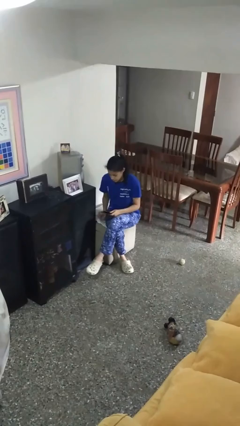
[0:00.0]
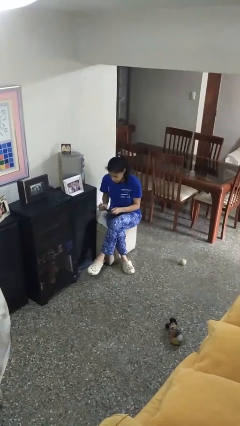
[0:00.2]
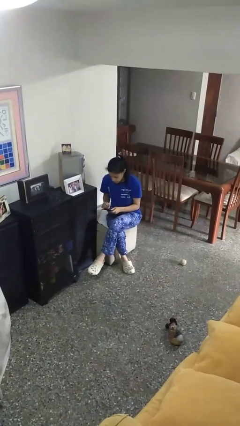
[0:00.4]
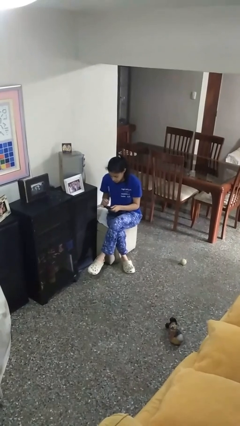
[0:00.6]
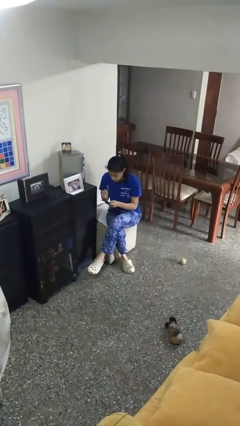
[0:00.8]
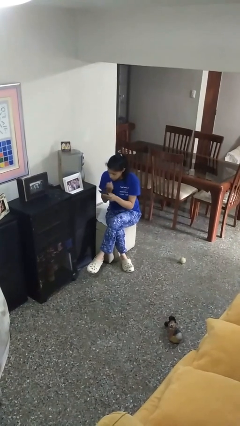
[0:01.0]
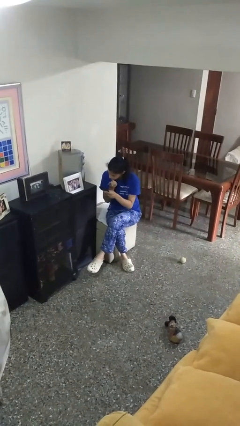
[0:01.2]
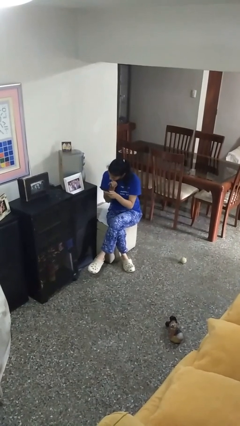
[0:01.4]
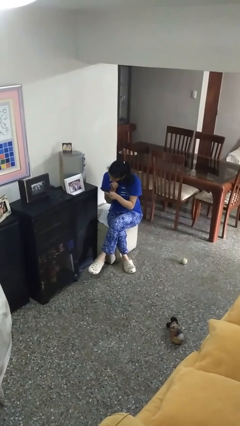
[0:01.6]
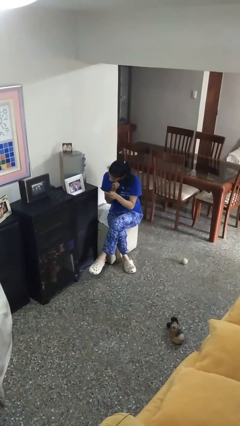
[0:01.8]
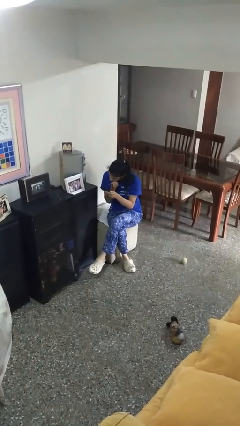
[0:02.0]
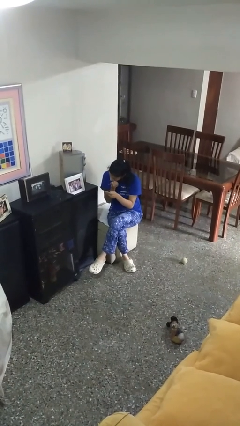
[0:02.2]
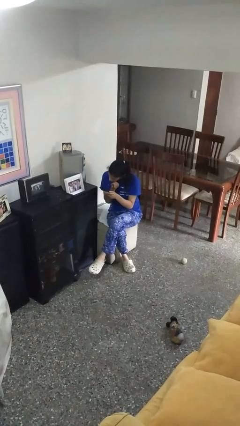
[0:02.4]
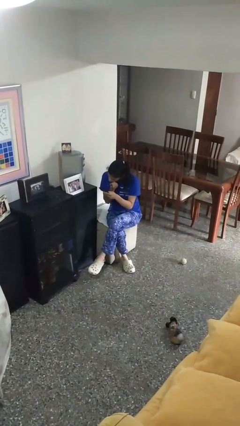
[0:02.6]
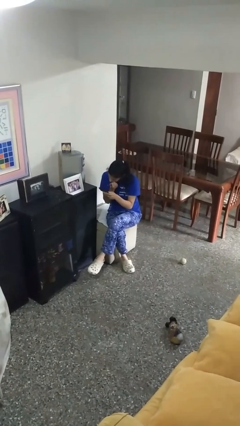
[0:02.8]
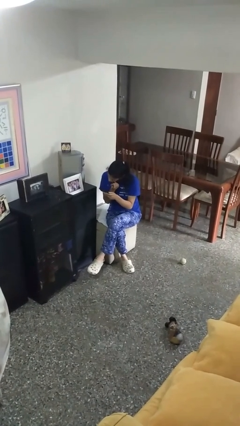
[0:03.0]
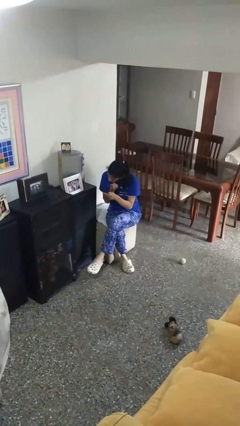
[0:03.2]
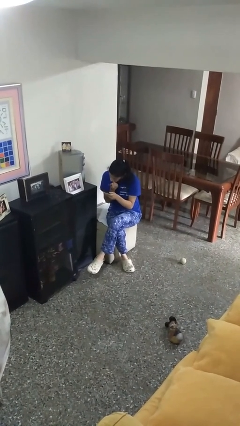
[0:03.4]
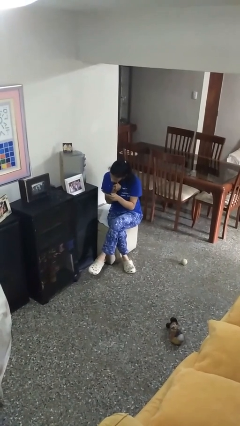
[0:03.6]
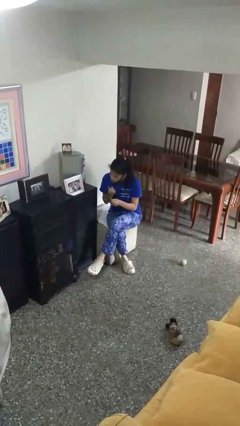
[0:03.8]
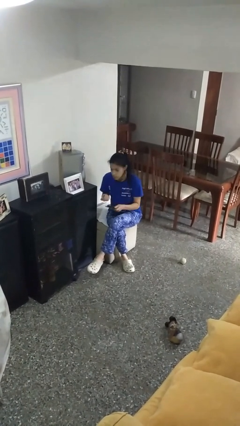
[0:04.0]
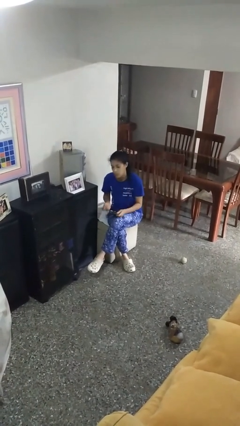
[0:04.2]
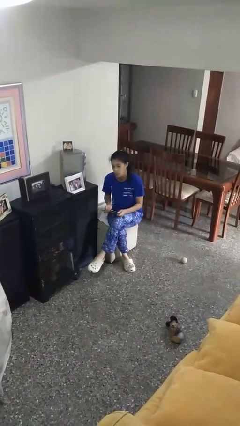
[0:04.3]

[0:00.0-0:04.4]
person applies eye makeup

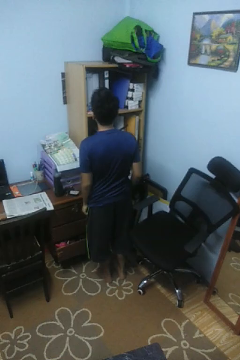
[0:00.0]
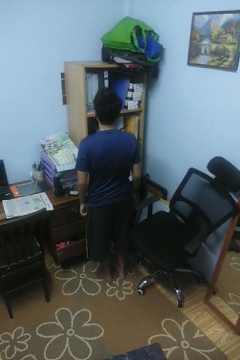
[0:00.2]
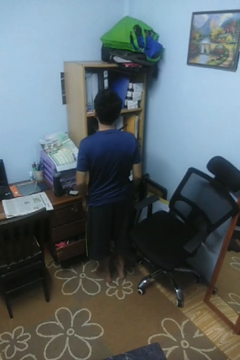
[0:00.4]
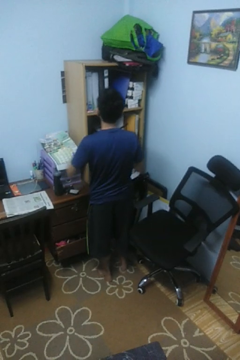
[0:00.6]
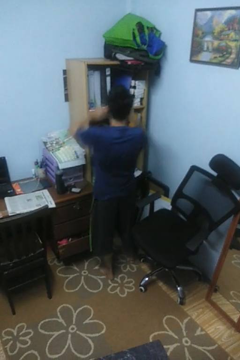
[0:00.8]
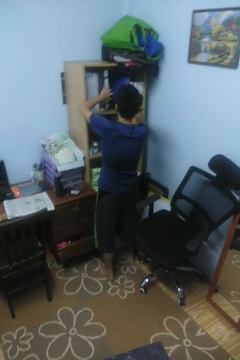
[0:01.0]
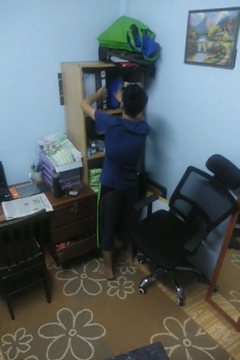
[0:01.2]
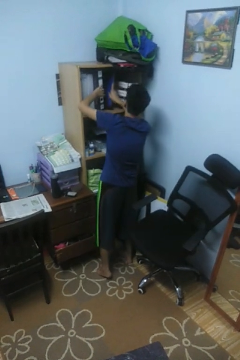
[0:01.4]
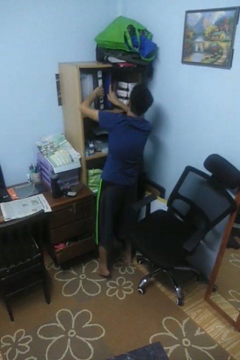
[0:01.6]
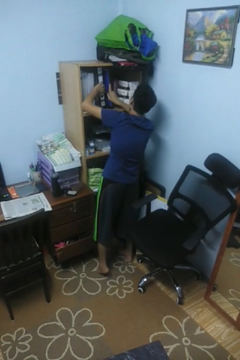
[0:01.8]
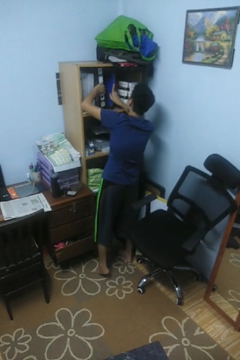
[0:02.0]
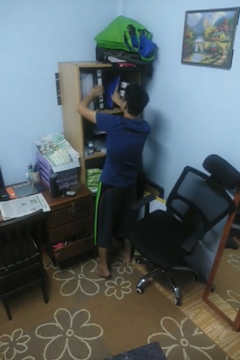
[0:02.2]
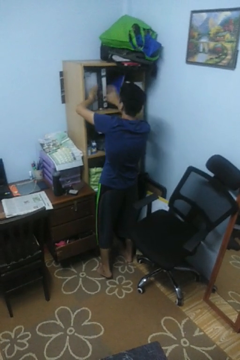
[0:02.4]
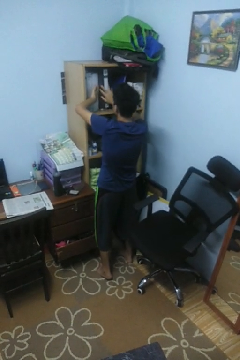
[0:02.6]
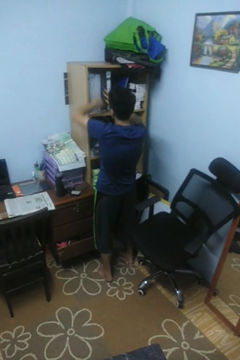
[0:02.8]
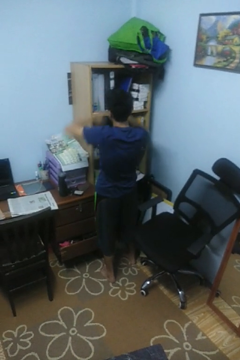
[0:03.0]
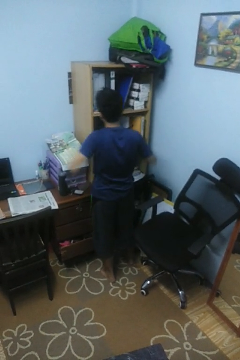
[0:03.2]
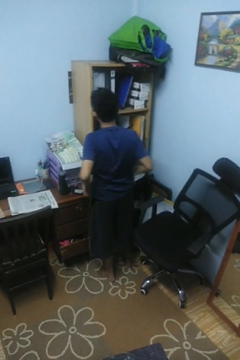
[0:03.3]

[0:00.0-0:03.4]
person searches in cabinet

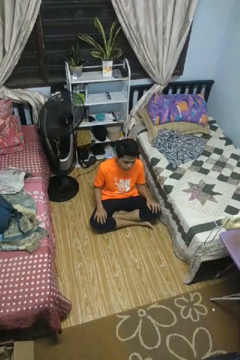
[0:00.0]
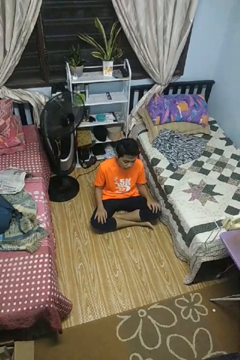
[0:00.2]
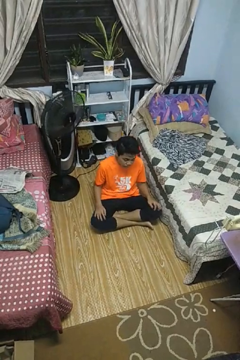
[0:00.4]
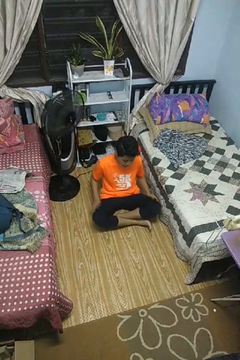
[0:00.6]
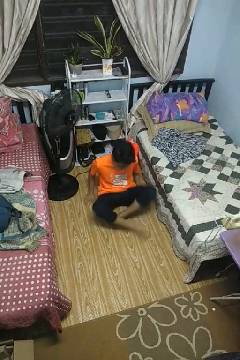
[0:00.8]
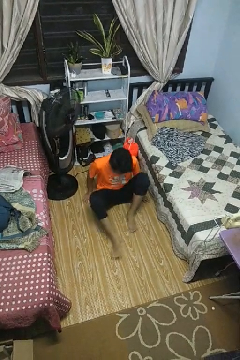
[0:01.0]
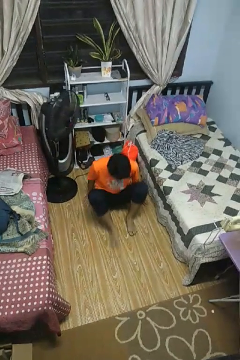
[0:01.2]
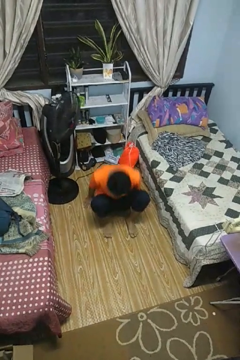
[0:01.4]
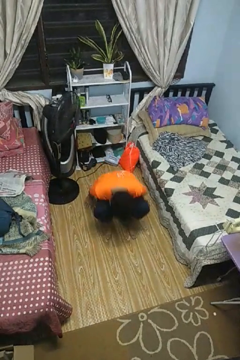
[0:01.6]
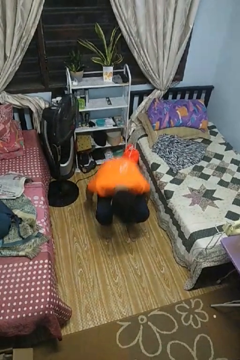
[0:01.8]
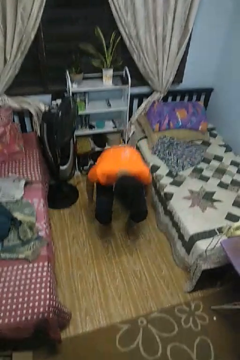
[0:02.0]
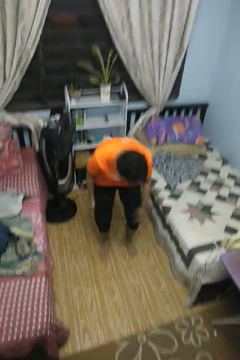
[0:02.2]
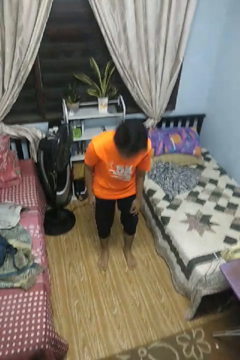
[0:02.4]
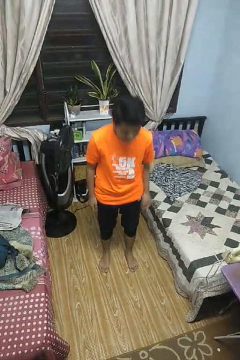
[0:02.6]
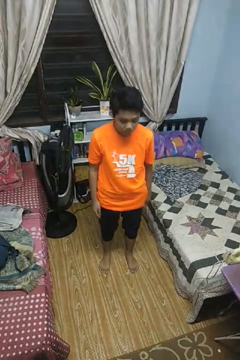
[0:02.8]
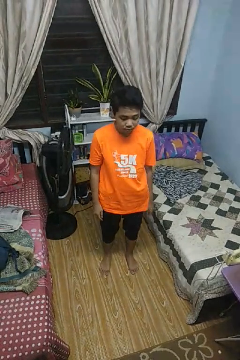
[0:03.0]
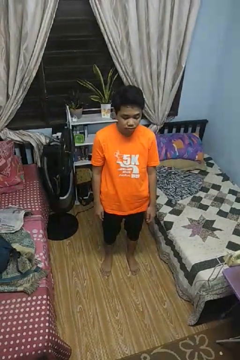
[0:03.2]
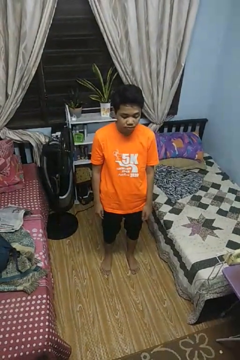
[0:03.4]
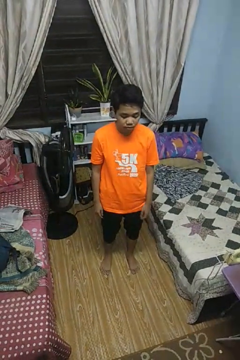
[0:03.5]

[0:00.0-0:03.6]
person stands up from floor

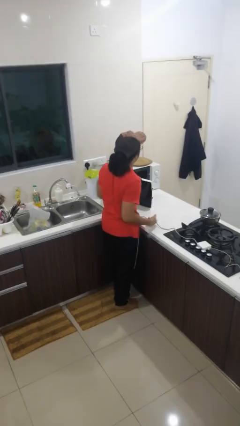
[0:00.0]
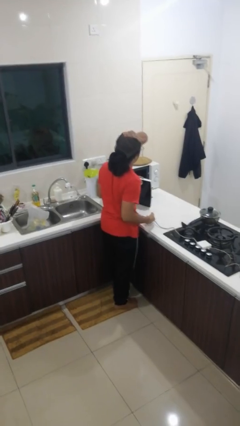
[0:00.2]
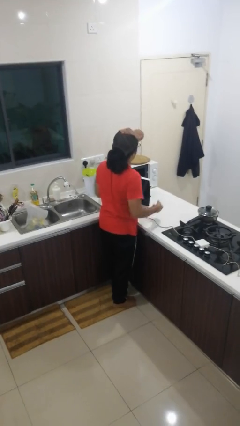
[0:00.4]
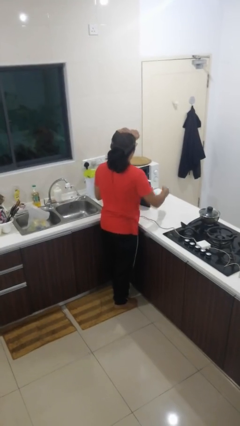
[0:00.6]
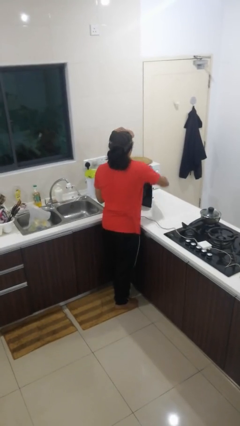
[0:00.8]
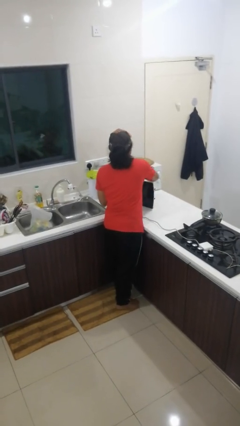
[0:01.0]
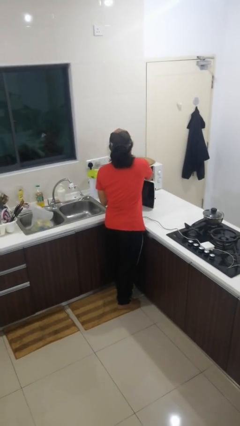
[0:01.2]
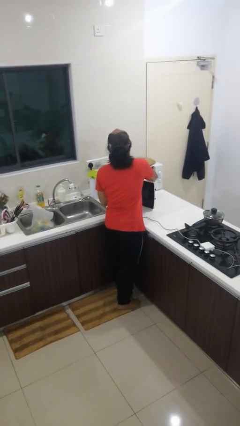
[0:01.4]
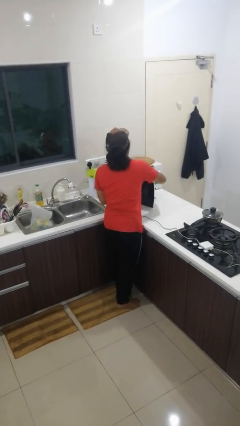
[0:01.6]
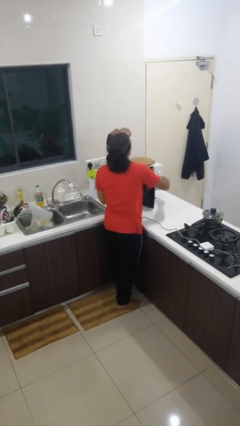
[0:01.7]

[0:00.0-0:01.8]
person takes object from microwave

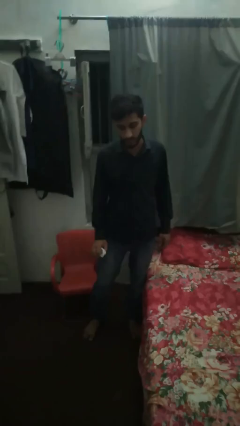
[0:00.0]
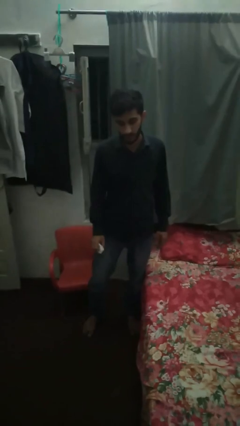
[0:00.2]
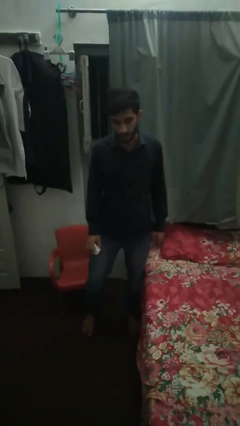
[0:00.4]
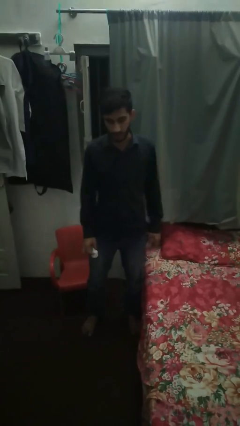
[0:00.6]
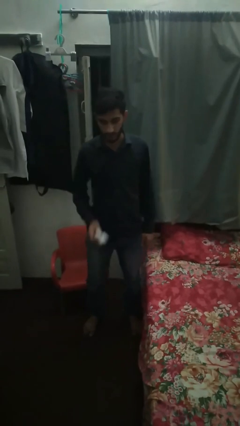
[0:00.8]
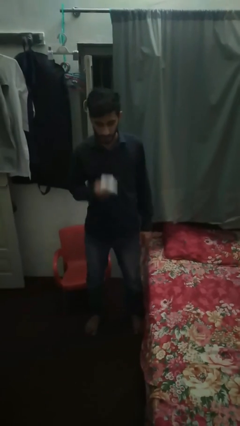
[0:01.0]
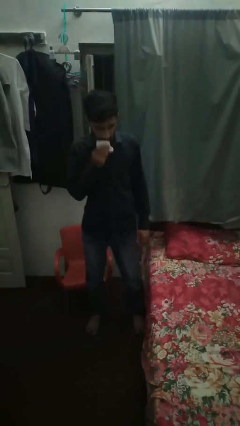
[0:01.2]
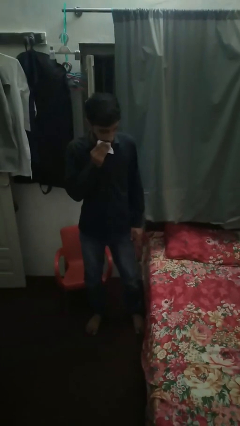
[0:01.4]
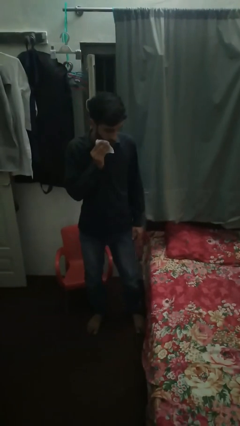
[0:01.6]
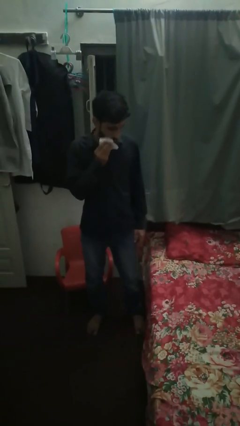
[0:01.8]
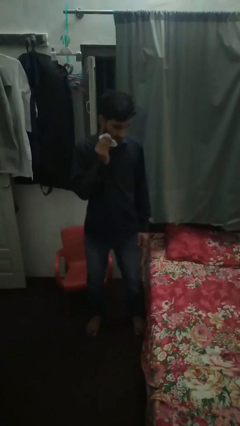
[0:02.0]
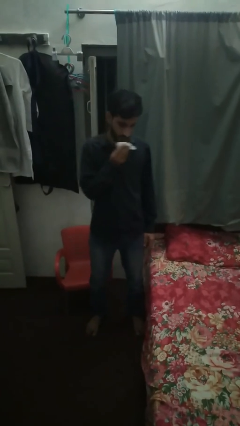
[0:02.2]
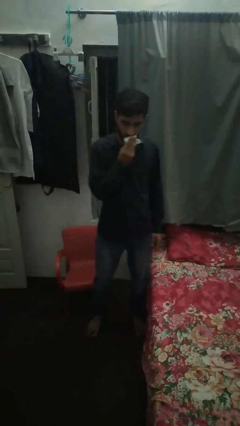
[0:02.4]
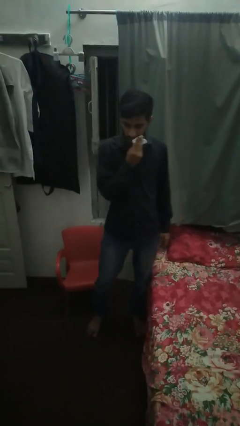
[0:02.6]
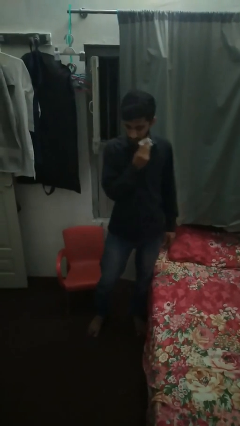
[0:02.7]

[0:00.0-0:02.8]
person wipes mouth with napkin

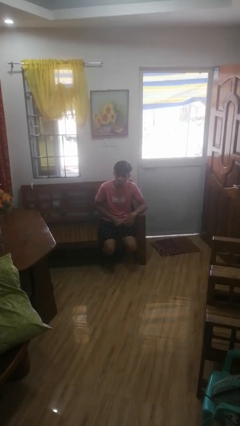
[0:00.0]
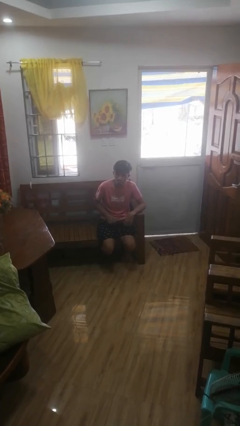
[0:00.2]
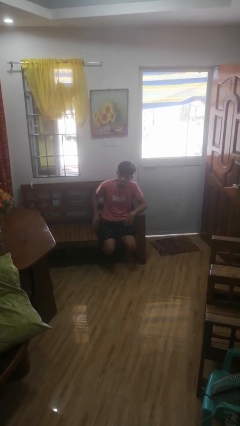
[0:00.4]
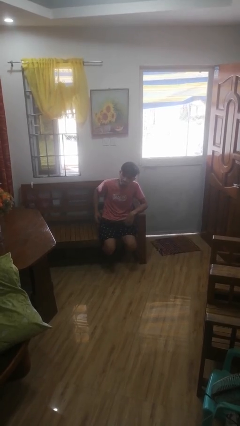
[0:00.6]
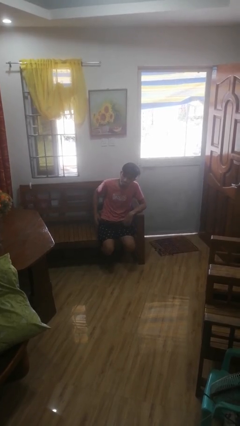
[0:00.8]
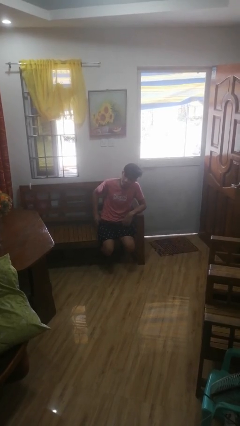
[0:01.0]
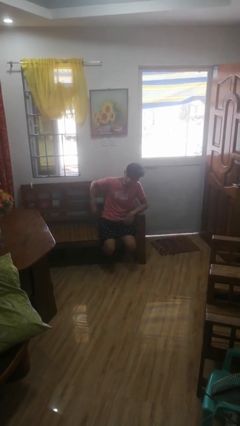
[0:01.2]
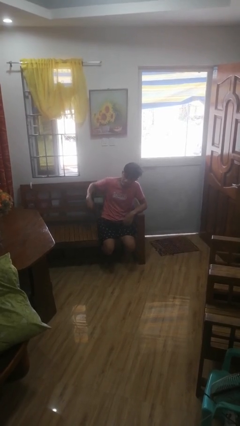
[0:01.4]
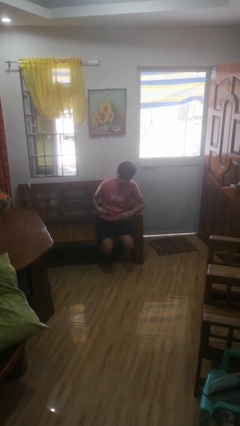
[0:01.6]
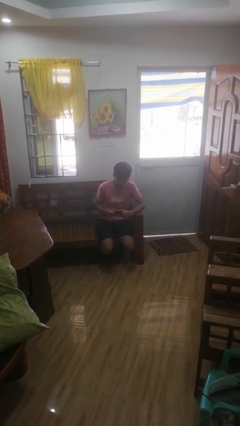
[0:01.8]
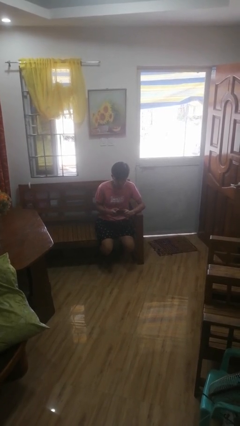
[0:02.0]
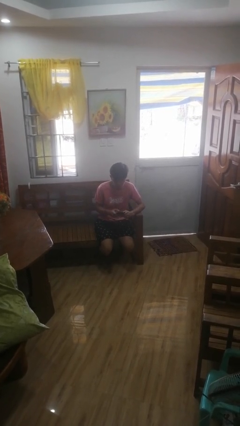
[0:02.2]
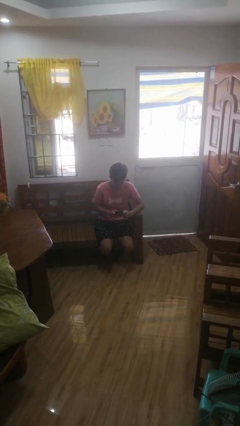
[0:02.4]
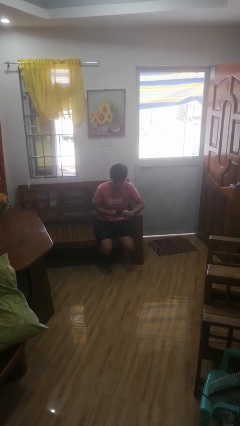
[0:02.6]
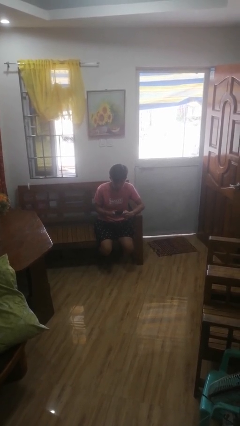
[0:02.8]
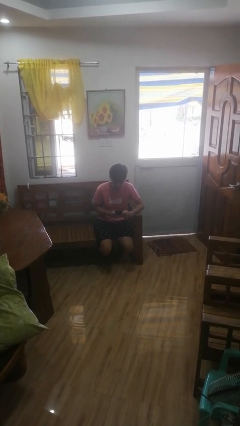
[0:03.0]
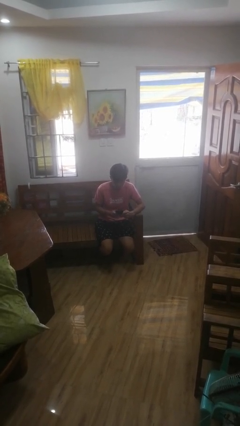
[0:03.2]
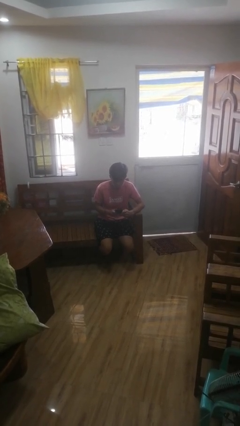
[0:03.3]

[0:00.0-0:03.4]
person takes phone from pocket
